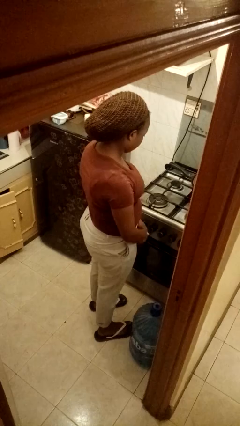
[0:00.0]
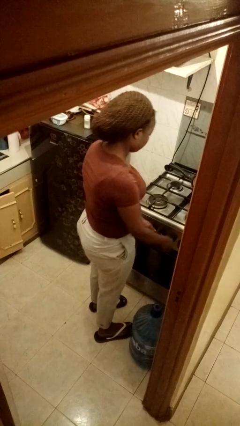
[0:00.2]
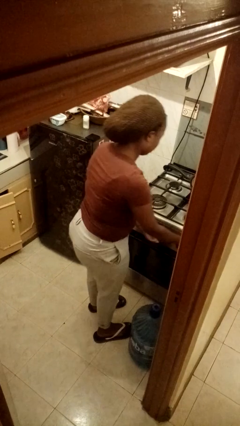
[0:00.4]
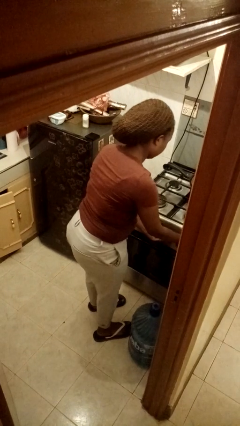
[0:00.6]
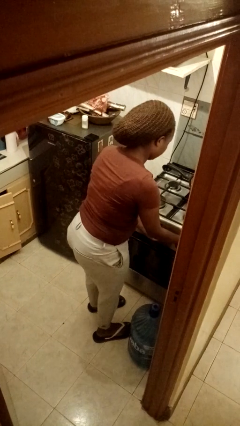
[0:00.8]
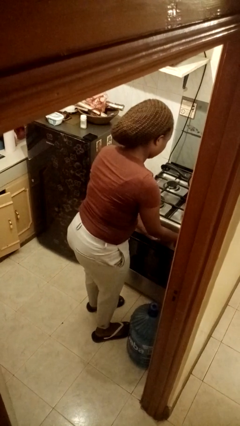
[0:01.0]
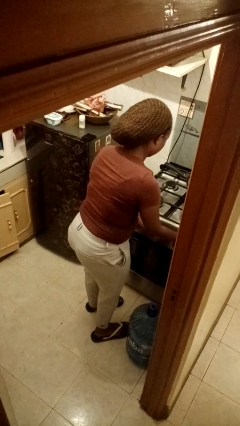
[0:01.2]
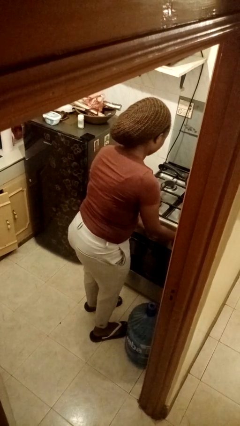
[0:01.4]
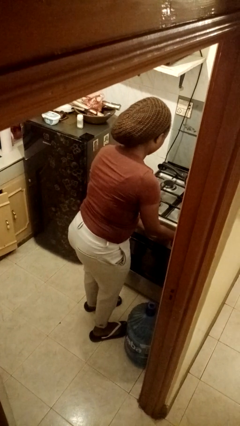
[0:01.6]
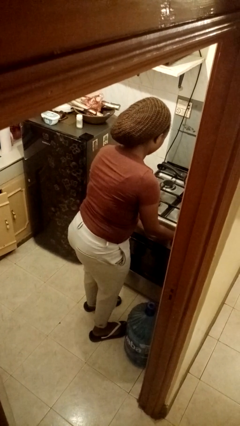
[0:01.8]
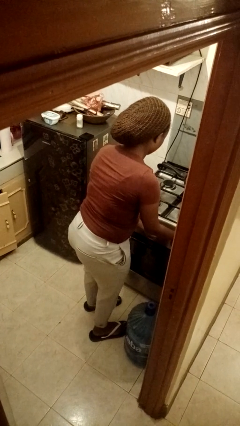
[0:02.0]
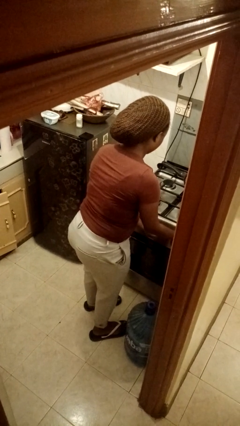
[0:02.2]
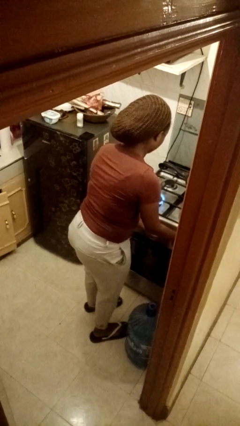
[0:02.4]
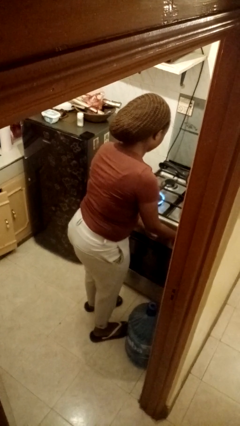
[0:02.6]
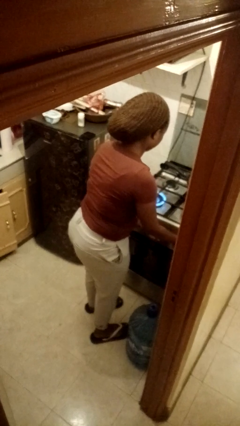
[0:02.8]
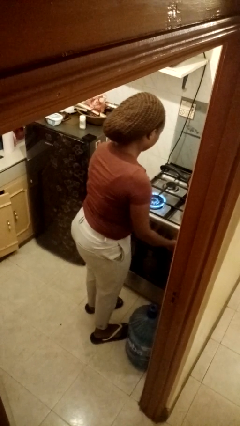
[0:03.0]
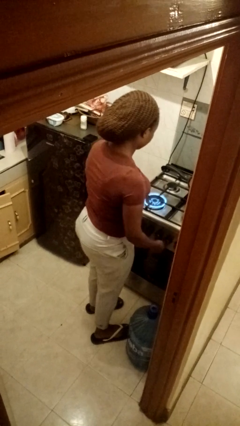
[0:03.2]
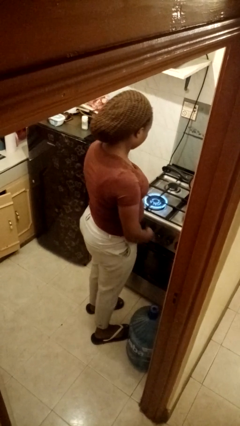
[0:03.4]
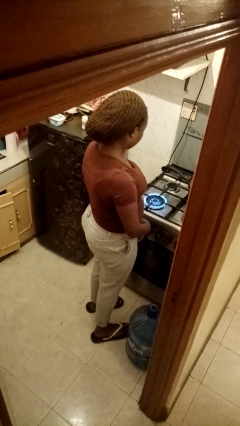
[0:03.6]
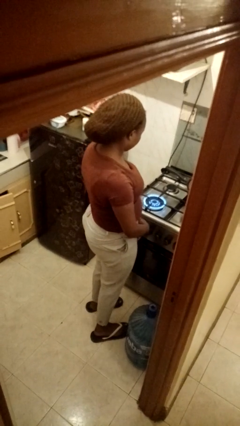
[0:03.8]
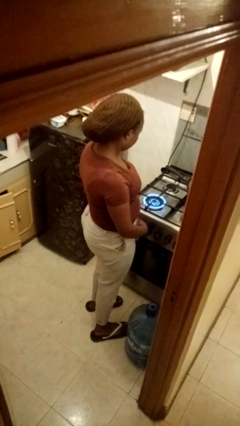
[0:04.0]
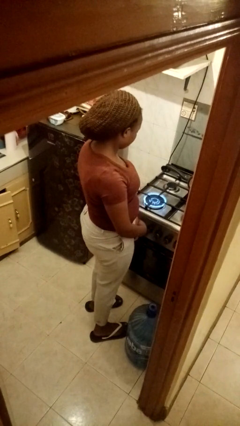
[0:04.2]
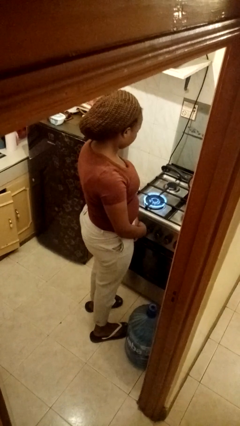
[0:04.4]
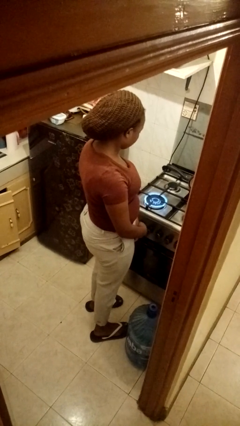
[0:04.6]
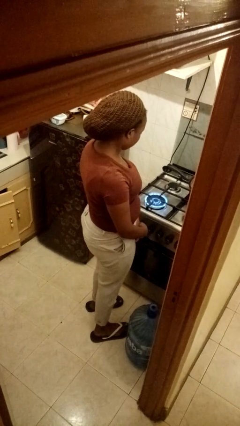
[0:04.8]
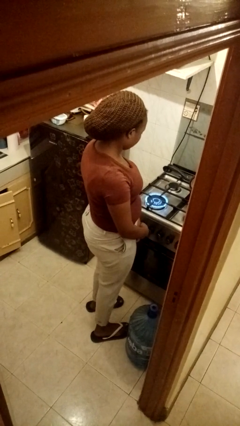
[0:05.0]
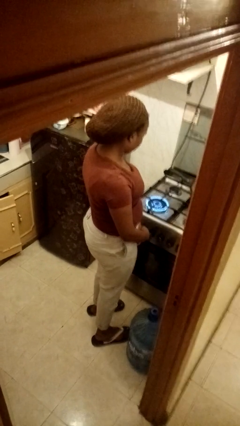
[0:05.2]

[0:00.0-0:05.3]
person turns on stovetop

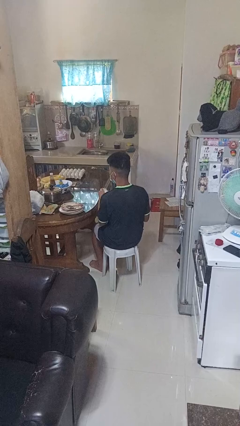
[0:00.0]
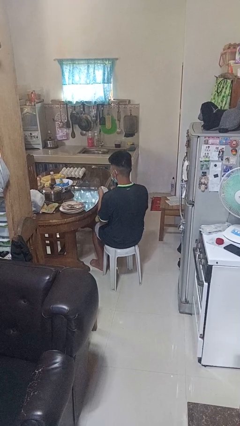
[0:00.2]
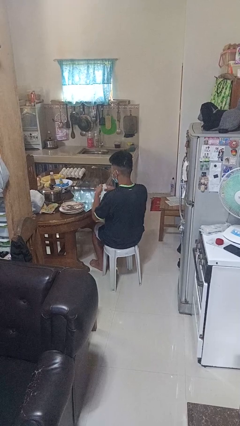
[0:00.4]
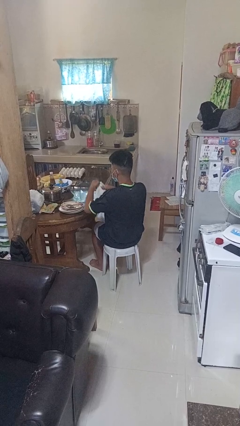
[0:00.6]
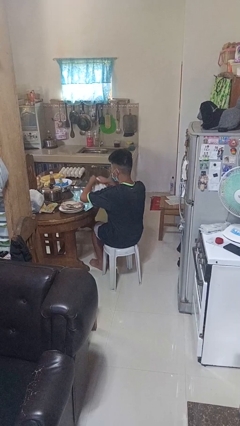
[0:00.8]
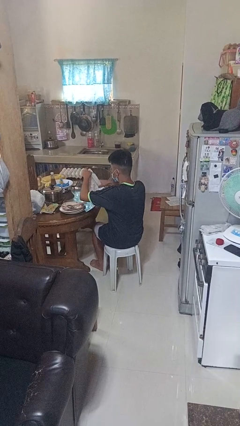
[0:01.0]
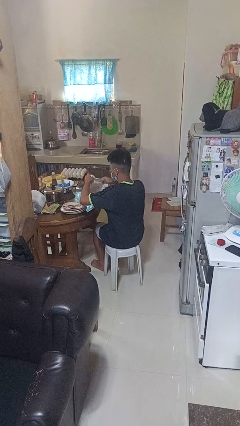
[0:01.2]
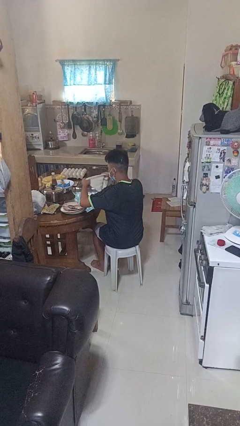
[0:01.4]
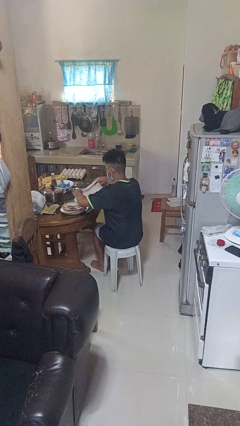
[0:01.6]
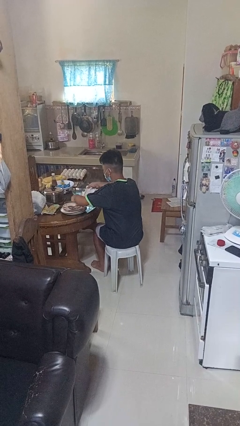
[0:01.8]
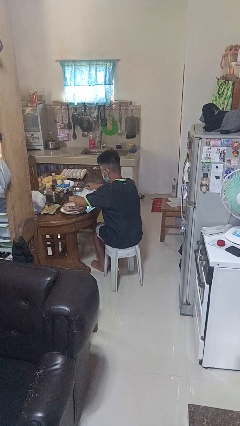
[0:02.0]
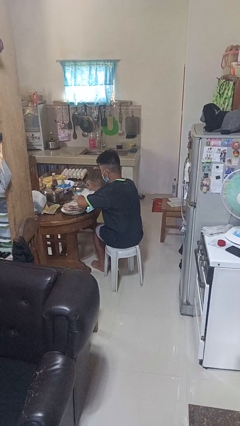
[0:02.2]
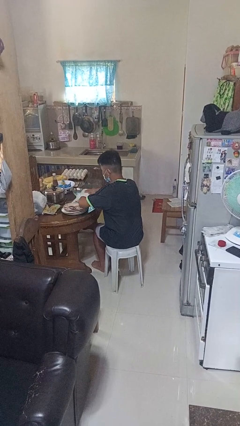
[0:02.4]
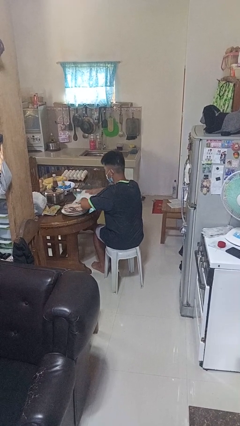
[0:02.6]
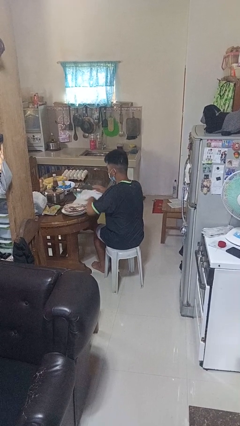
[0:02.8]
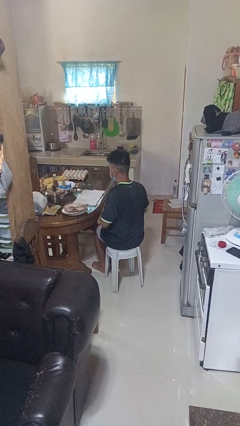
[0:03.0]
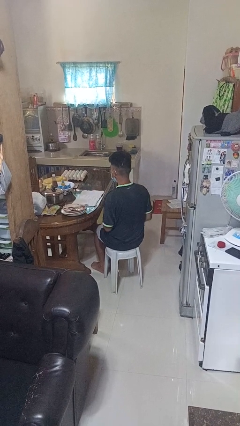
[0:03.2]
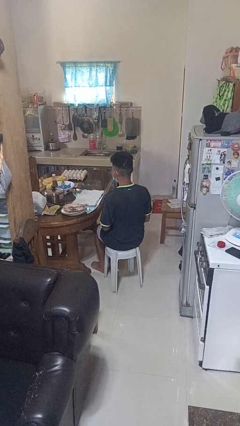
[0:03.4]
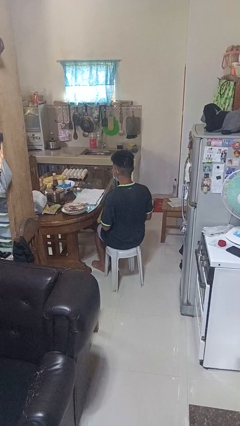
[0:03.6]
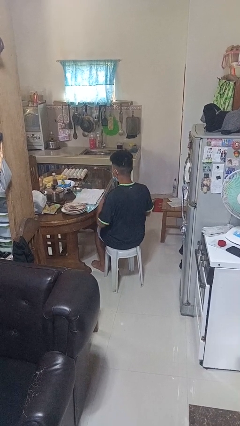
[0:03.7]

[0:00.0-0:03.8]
person spreads tablecloth

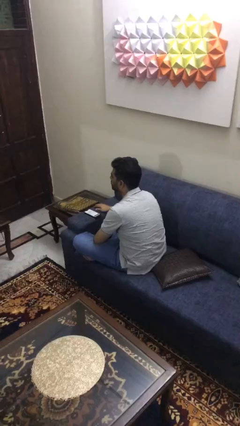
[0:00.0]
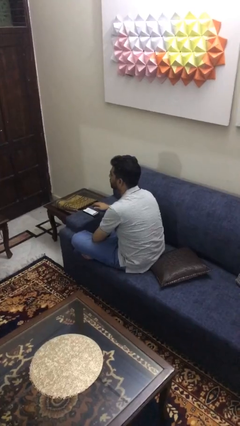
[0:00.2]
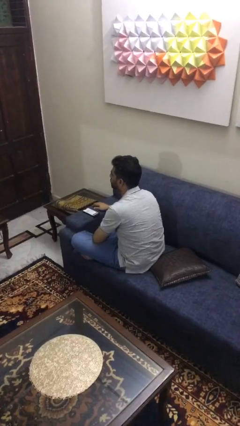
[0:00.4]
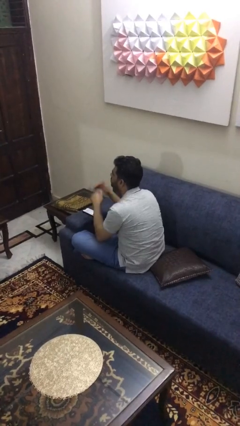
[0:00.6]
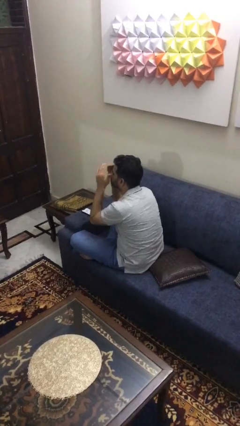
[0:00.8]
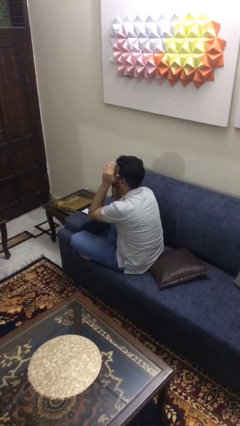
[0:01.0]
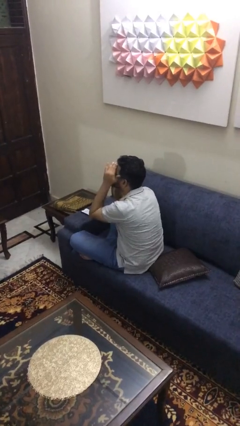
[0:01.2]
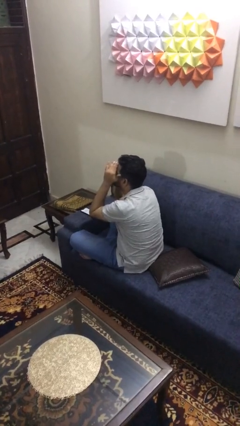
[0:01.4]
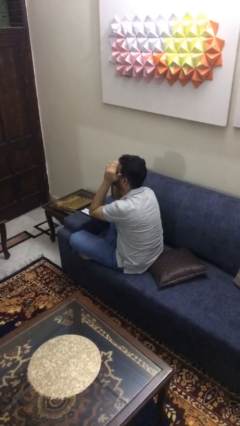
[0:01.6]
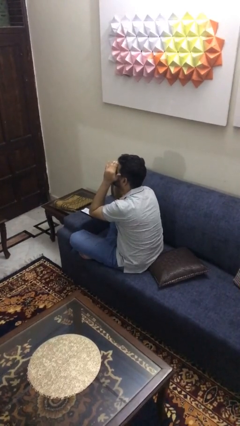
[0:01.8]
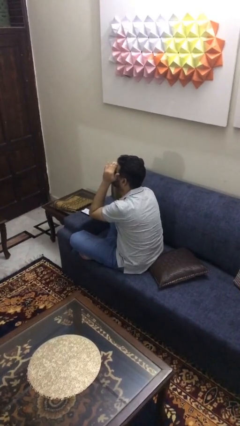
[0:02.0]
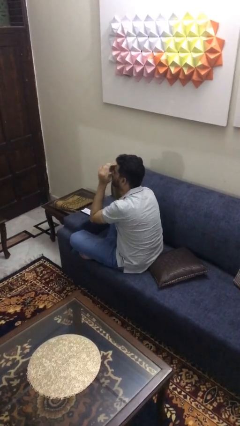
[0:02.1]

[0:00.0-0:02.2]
person shades eyes

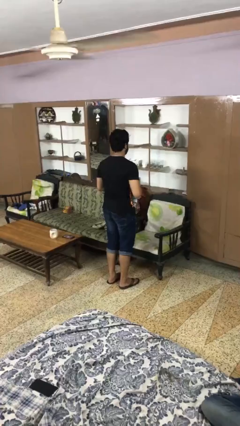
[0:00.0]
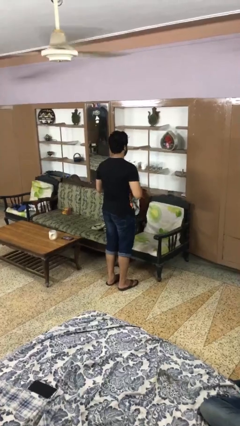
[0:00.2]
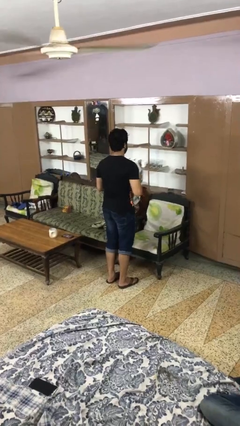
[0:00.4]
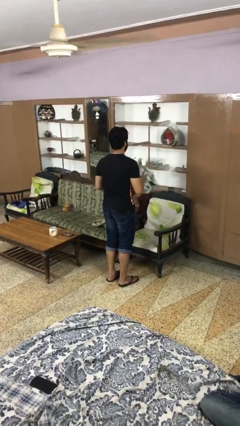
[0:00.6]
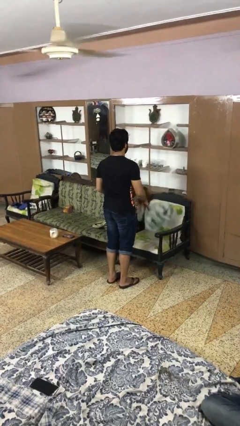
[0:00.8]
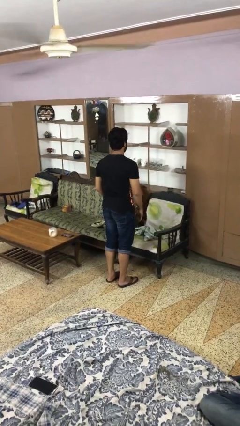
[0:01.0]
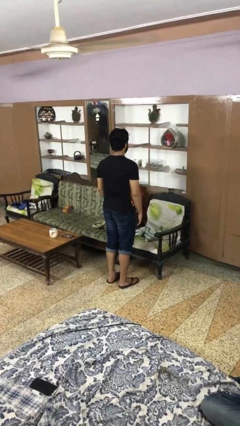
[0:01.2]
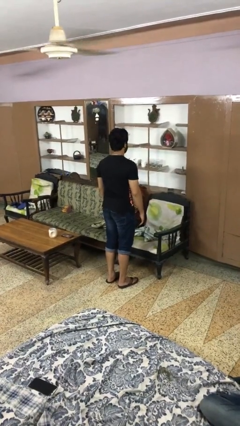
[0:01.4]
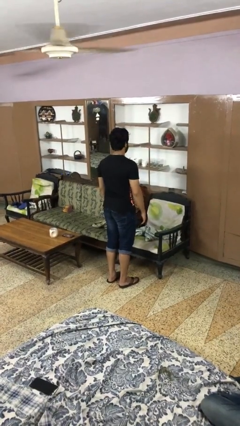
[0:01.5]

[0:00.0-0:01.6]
person puts down object into cabinet

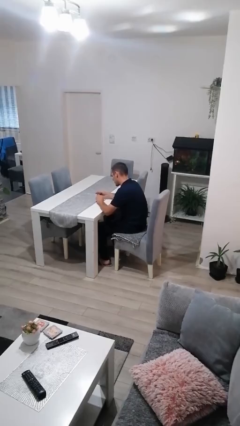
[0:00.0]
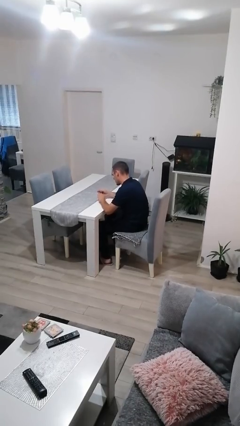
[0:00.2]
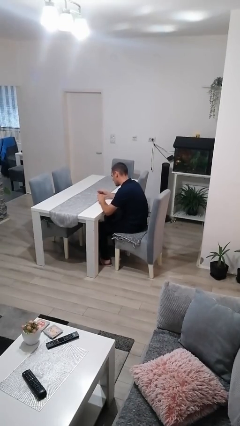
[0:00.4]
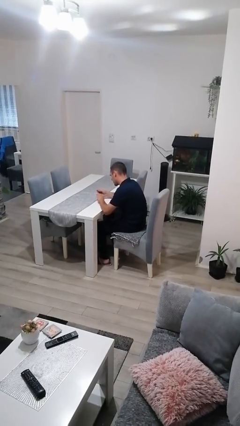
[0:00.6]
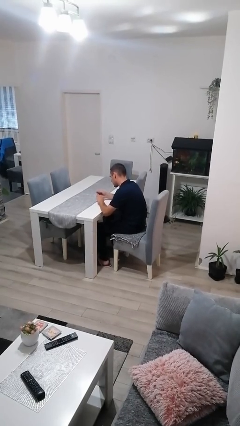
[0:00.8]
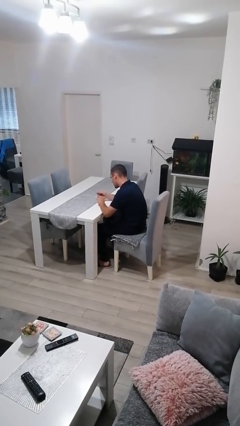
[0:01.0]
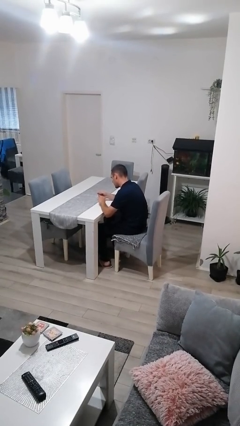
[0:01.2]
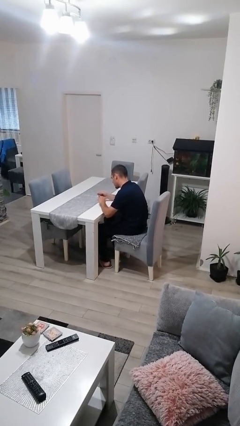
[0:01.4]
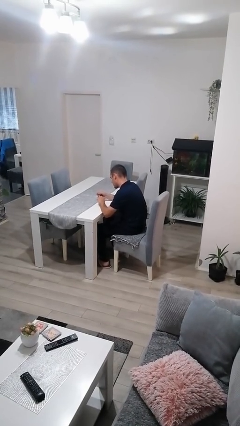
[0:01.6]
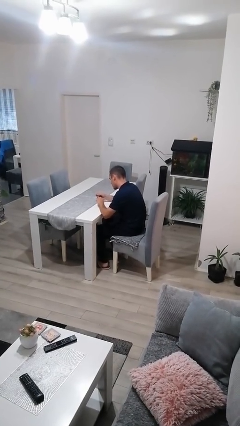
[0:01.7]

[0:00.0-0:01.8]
person clips fingernails

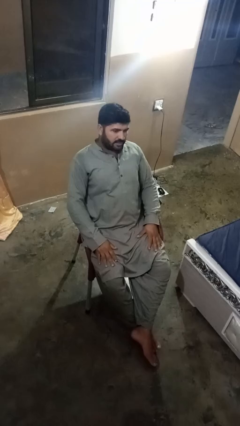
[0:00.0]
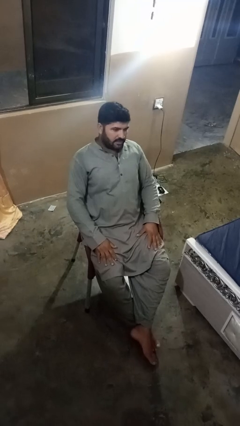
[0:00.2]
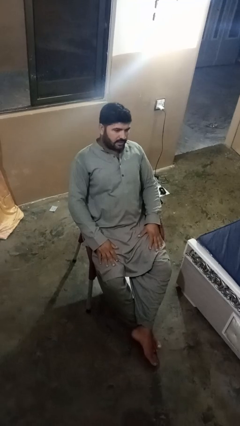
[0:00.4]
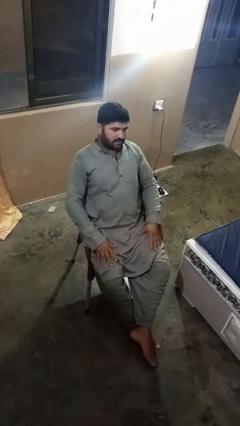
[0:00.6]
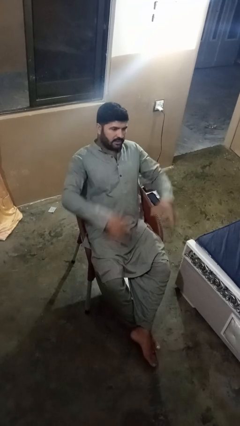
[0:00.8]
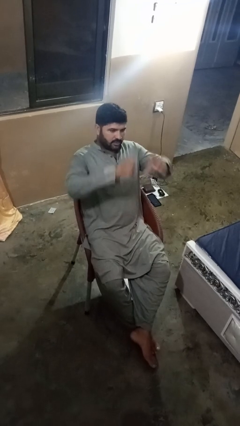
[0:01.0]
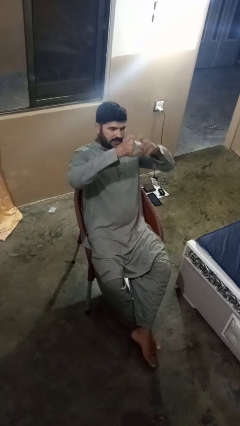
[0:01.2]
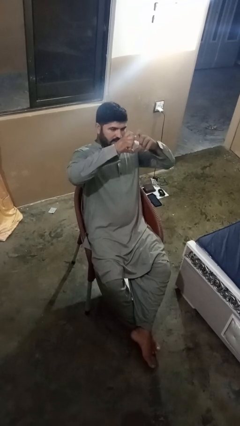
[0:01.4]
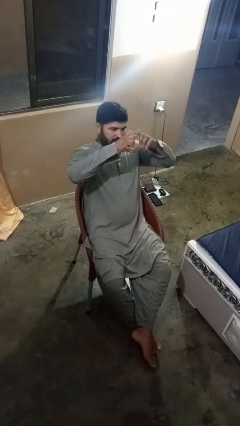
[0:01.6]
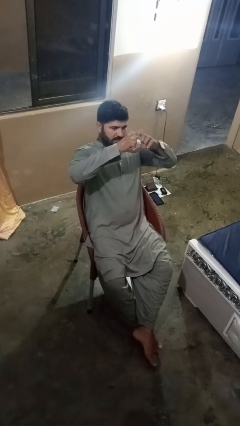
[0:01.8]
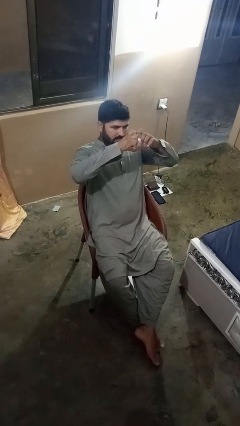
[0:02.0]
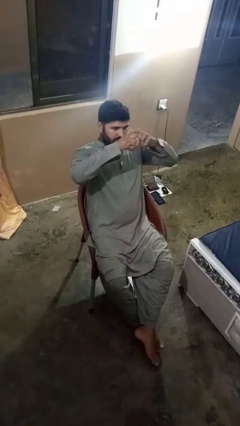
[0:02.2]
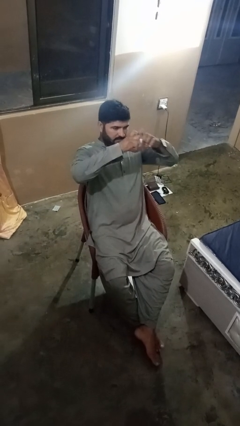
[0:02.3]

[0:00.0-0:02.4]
person gestures heart

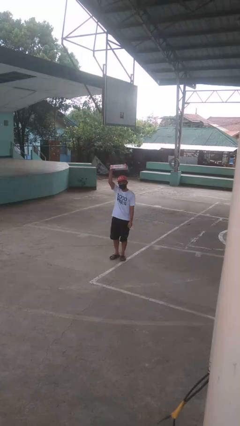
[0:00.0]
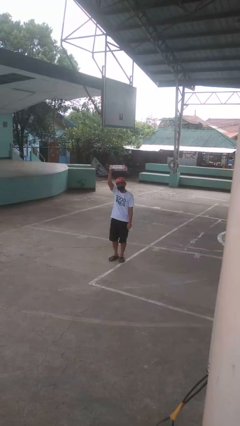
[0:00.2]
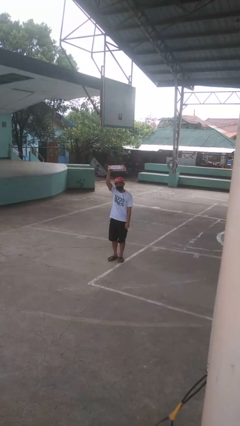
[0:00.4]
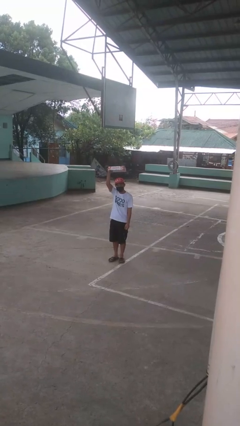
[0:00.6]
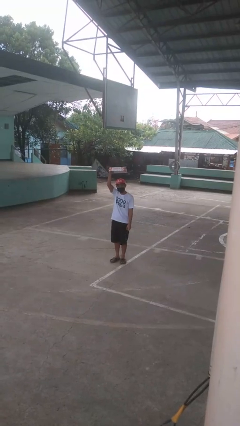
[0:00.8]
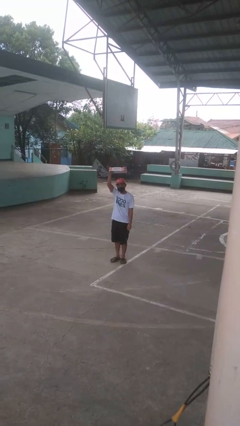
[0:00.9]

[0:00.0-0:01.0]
person holds object above head
